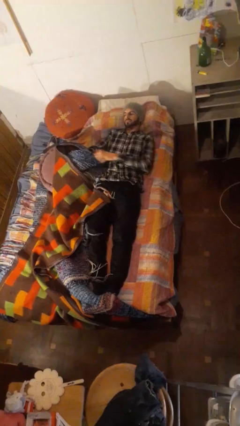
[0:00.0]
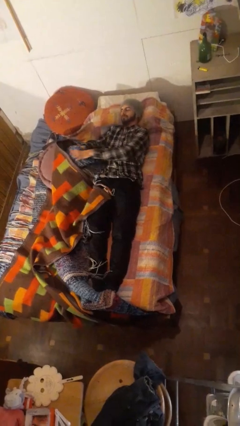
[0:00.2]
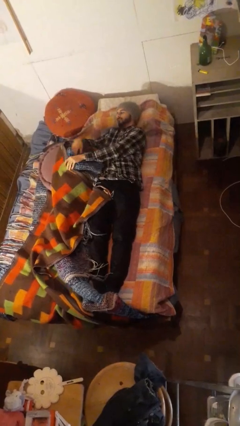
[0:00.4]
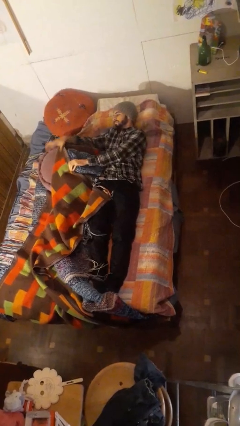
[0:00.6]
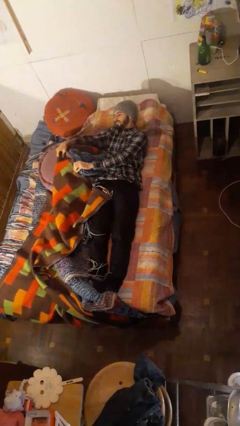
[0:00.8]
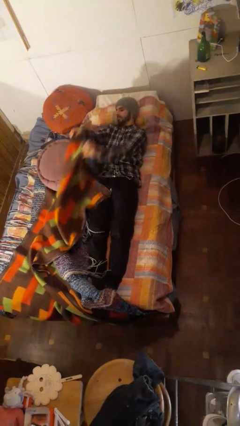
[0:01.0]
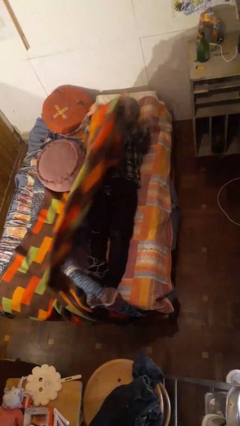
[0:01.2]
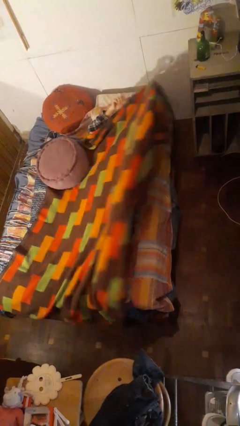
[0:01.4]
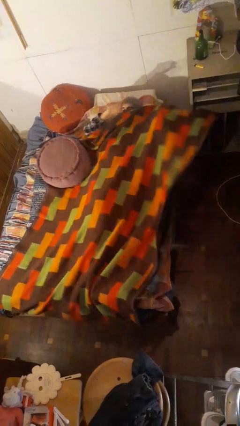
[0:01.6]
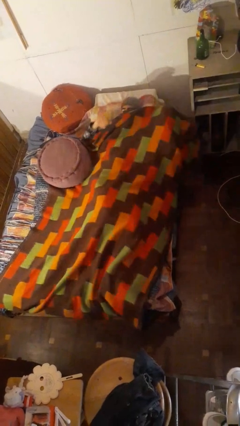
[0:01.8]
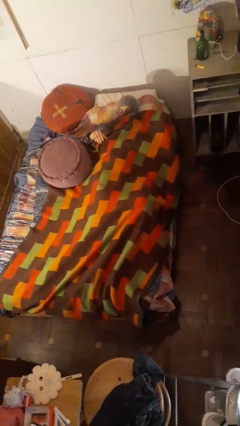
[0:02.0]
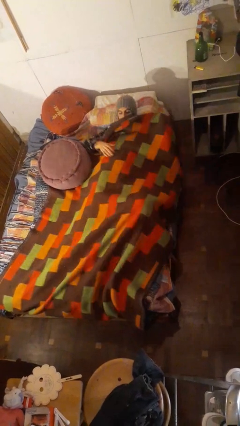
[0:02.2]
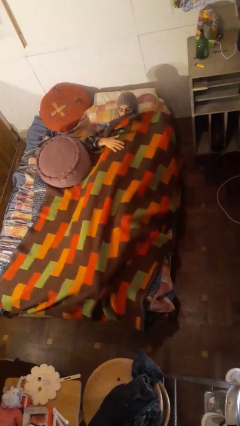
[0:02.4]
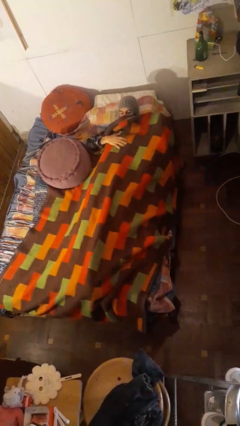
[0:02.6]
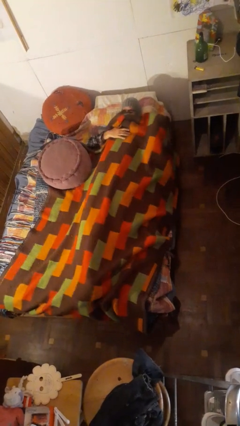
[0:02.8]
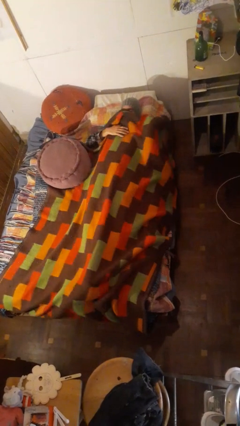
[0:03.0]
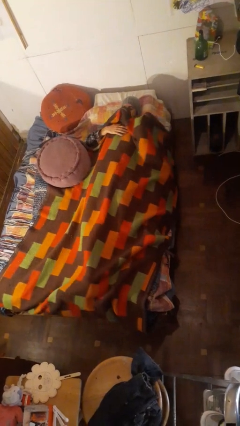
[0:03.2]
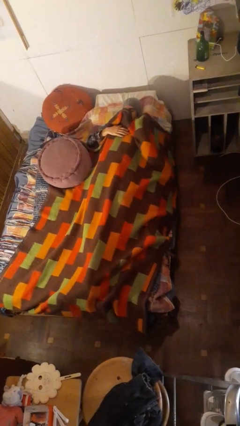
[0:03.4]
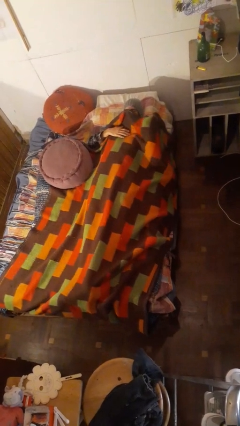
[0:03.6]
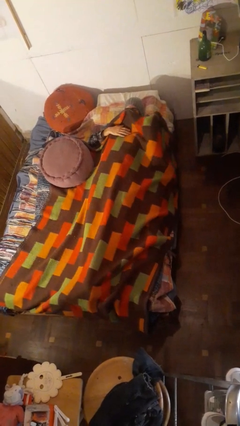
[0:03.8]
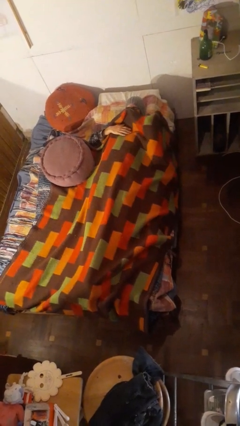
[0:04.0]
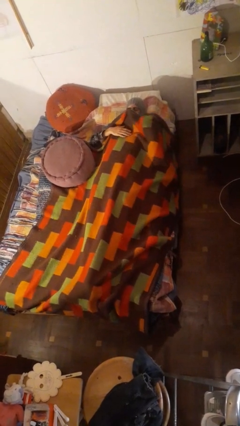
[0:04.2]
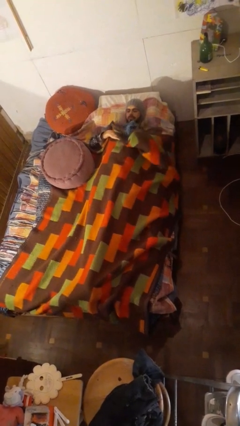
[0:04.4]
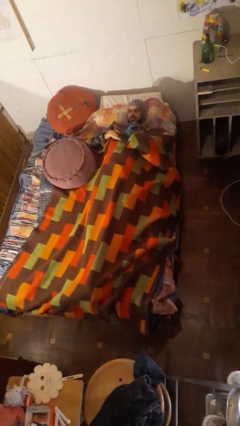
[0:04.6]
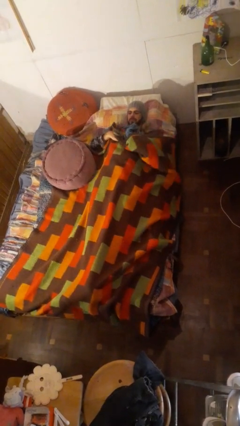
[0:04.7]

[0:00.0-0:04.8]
person covers with bedsheets

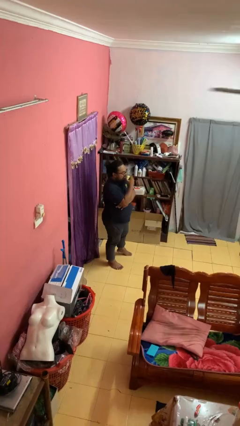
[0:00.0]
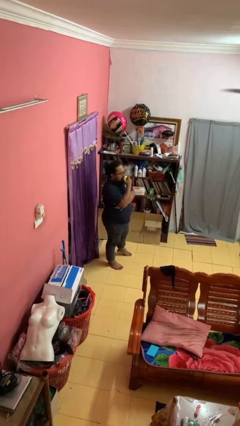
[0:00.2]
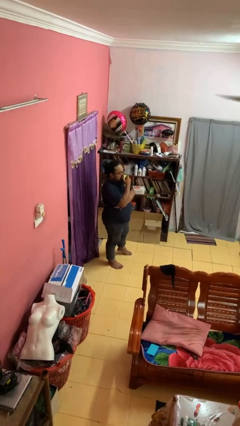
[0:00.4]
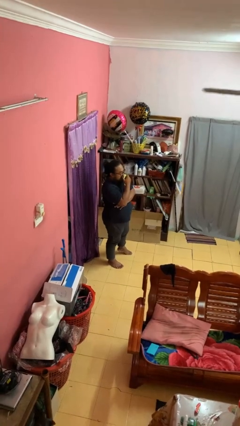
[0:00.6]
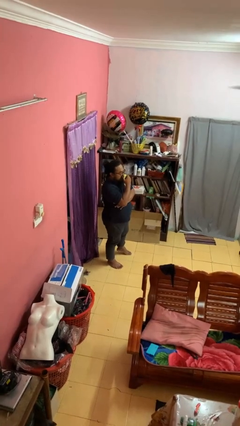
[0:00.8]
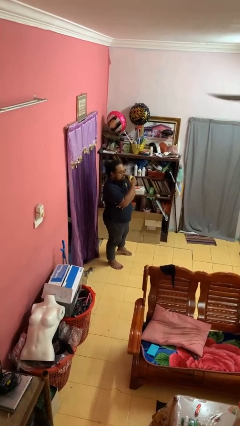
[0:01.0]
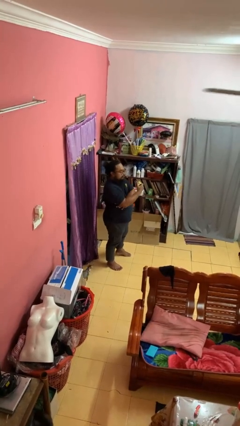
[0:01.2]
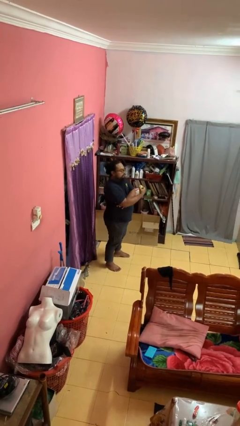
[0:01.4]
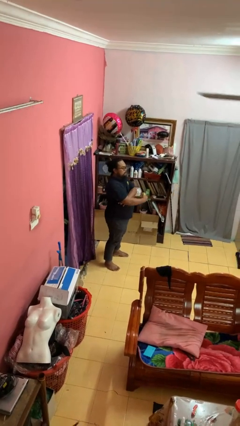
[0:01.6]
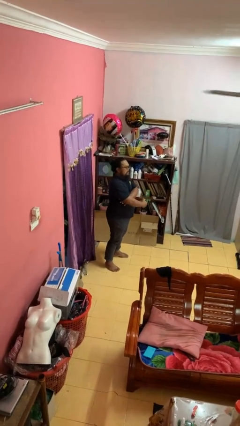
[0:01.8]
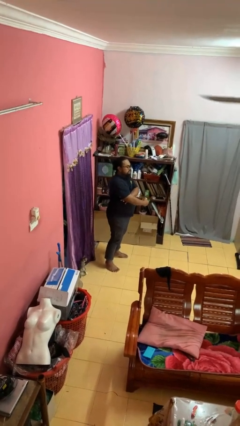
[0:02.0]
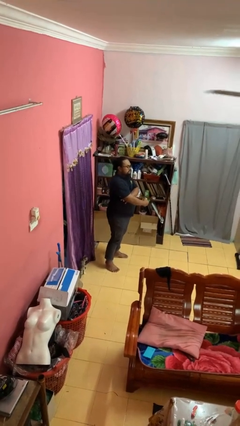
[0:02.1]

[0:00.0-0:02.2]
person eats apple

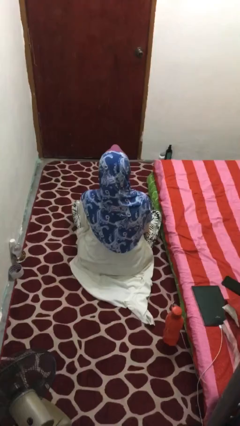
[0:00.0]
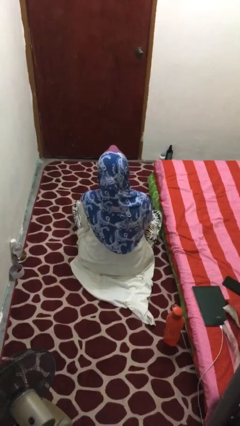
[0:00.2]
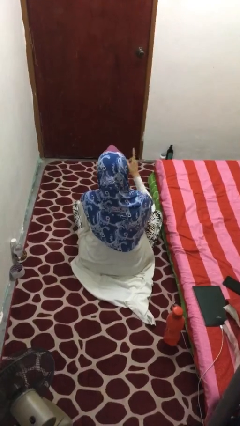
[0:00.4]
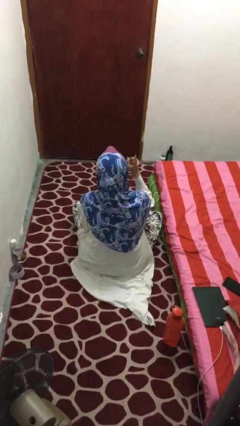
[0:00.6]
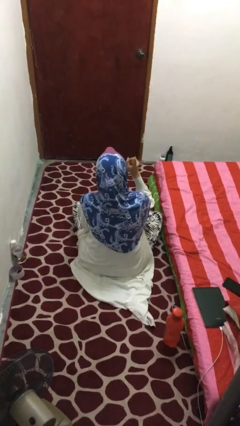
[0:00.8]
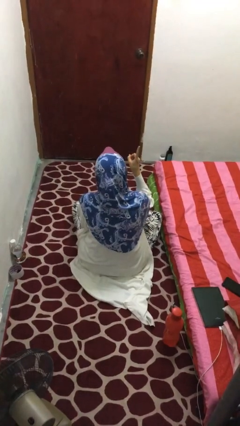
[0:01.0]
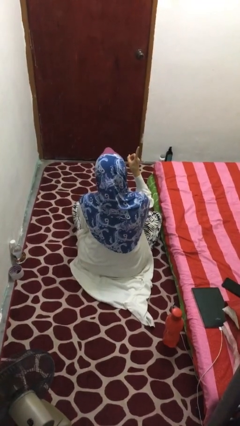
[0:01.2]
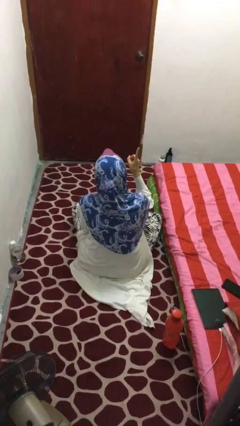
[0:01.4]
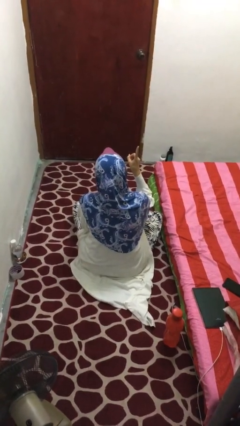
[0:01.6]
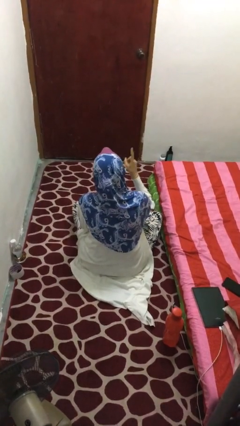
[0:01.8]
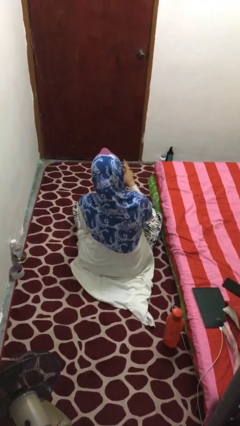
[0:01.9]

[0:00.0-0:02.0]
person gestures number one

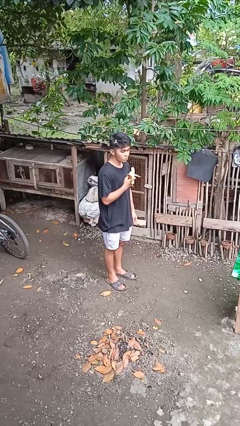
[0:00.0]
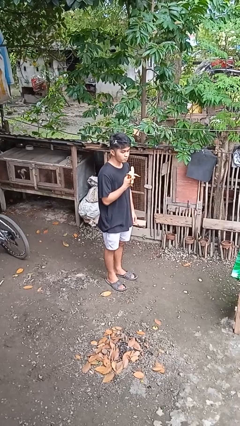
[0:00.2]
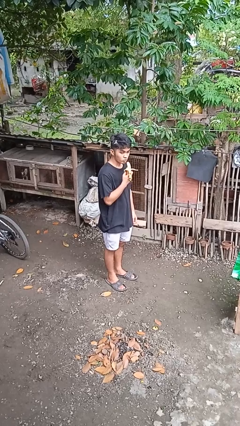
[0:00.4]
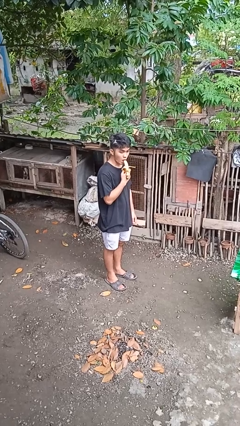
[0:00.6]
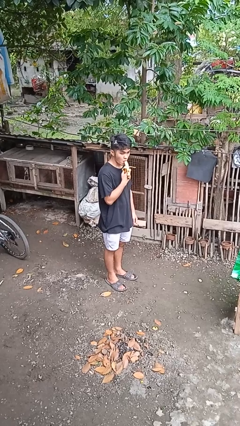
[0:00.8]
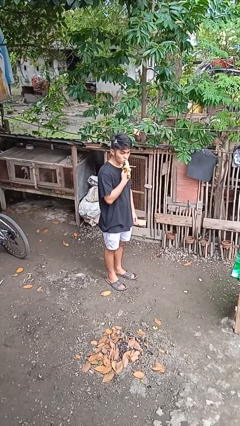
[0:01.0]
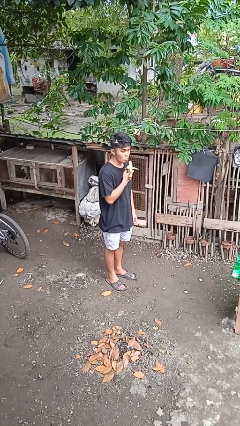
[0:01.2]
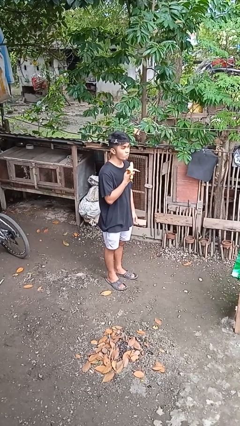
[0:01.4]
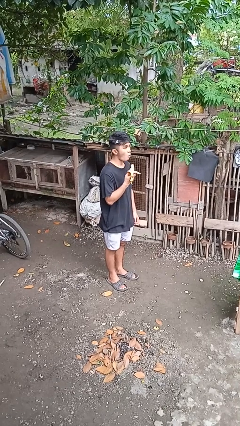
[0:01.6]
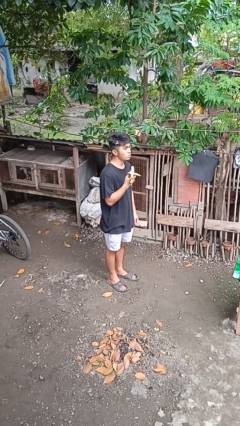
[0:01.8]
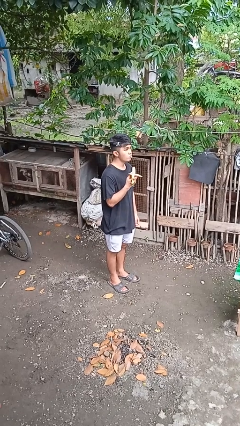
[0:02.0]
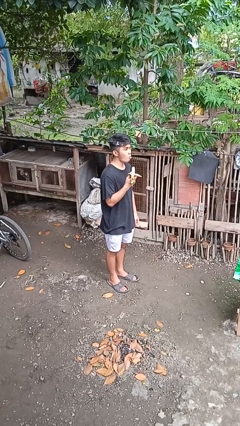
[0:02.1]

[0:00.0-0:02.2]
person eats banana

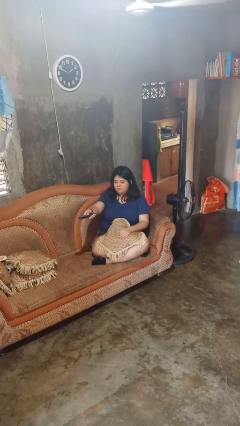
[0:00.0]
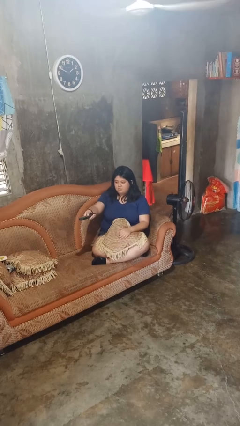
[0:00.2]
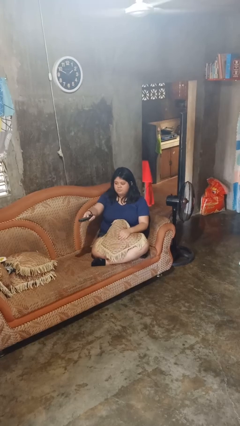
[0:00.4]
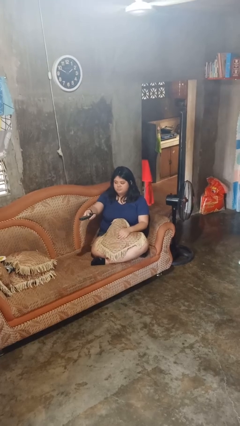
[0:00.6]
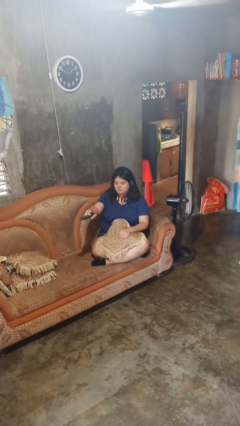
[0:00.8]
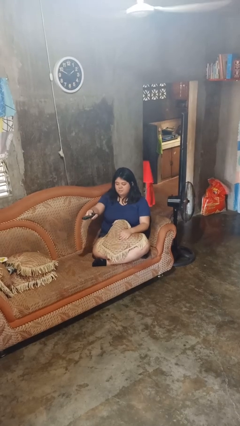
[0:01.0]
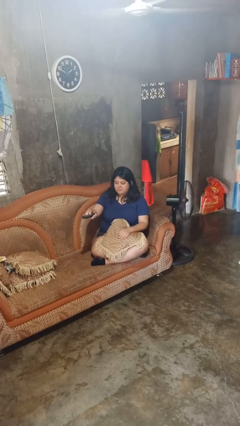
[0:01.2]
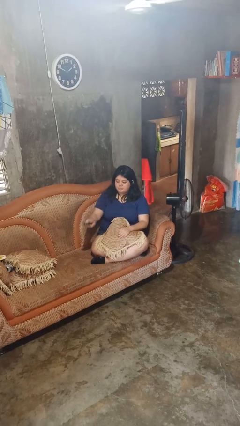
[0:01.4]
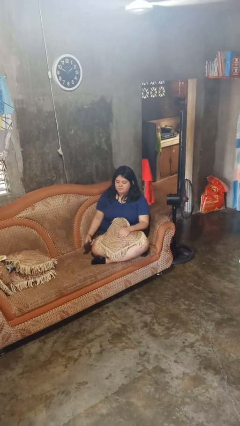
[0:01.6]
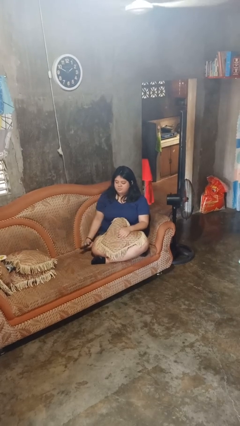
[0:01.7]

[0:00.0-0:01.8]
person uses television remote

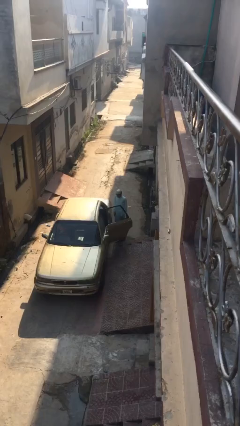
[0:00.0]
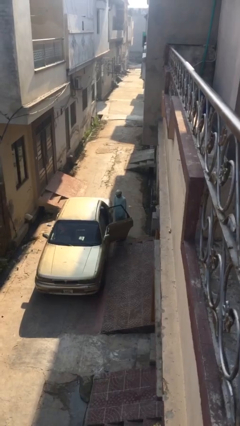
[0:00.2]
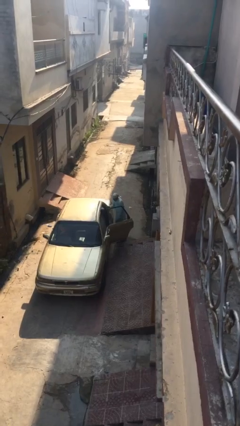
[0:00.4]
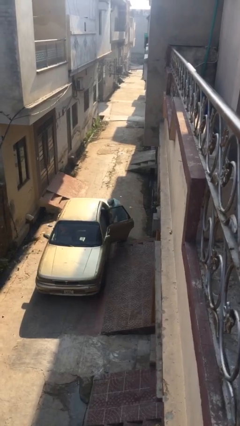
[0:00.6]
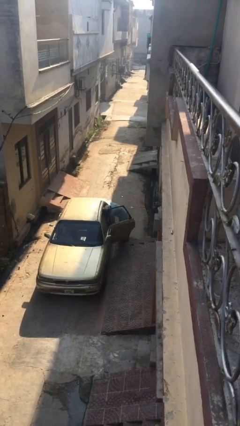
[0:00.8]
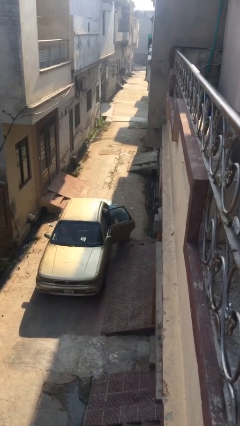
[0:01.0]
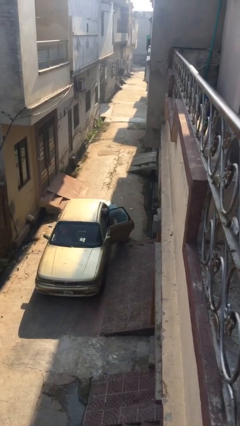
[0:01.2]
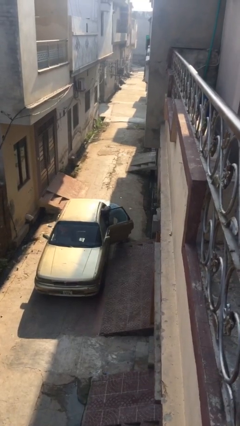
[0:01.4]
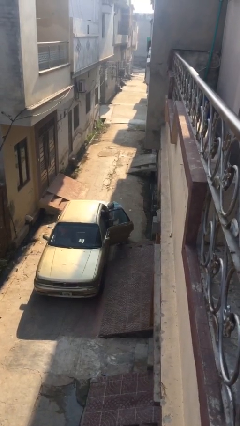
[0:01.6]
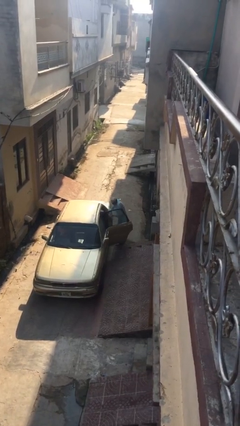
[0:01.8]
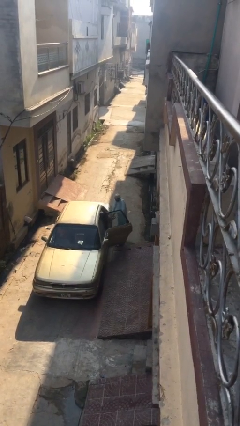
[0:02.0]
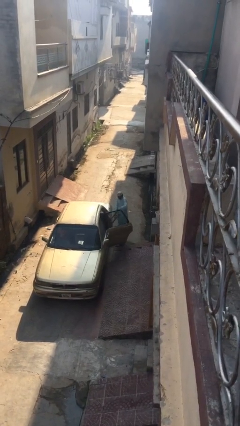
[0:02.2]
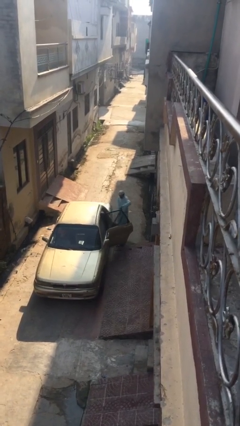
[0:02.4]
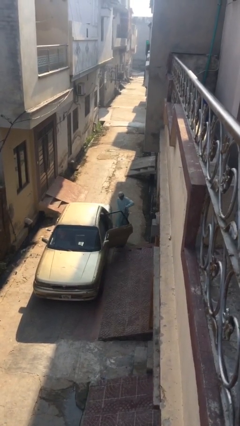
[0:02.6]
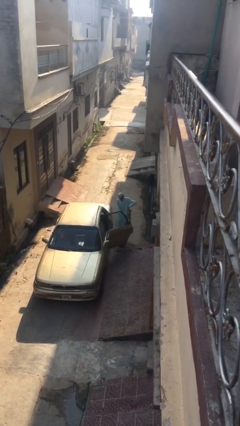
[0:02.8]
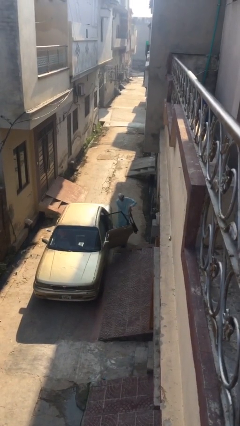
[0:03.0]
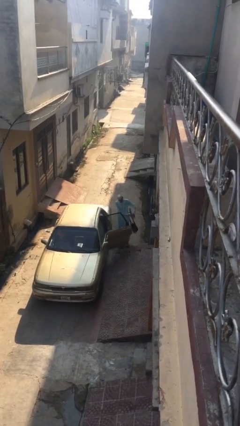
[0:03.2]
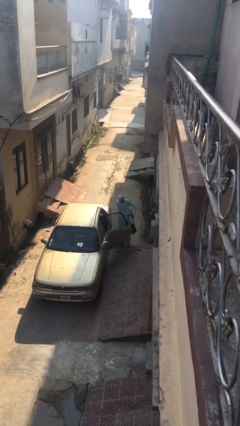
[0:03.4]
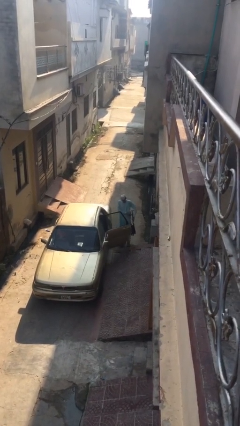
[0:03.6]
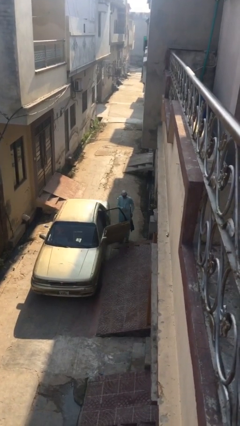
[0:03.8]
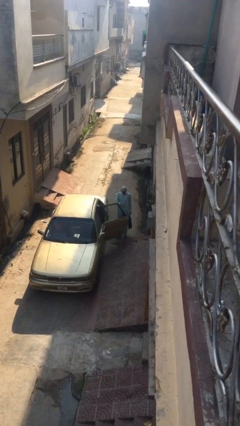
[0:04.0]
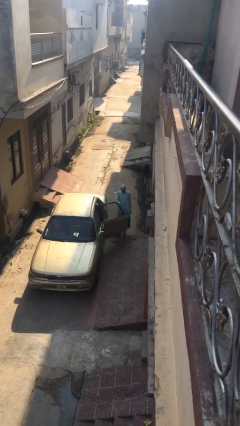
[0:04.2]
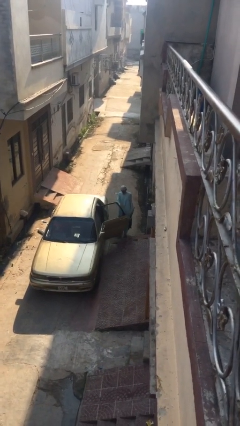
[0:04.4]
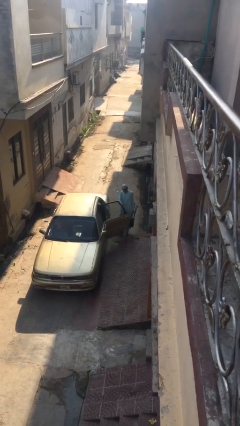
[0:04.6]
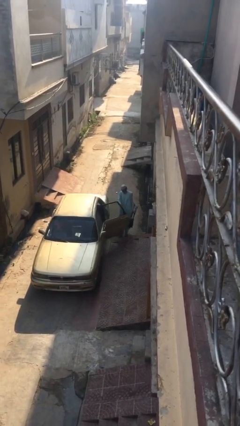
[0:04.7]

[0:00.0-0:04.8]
person unloads car
